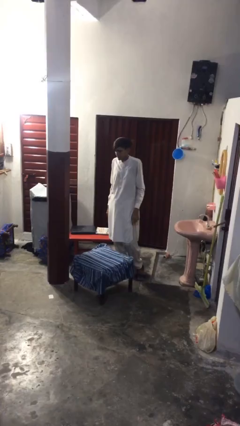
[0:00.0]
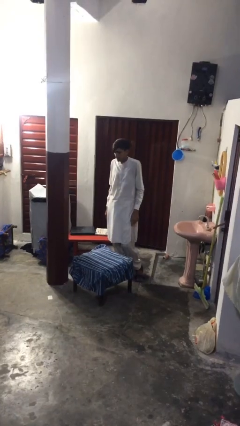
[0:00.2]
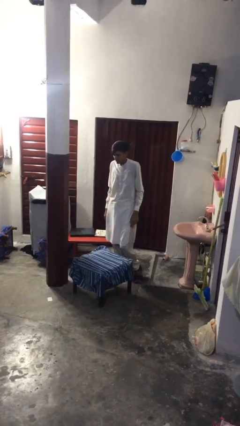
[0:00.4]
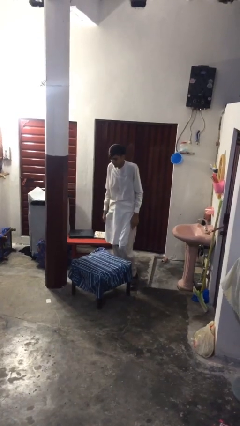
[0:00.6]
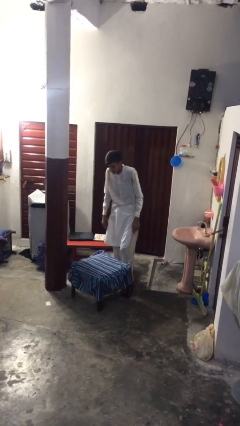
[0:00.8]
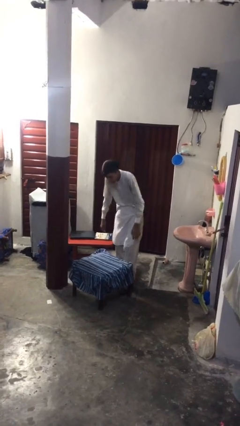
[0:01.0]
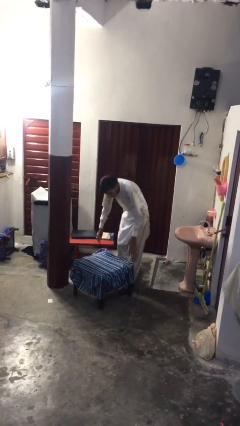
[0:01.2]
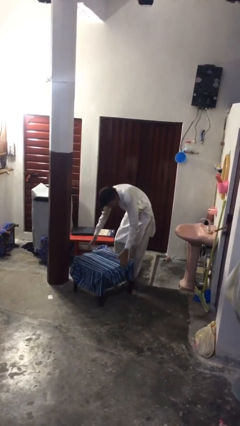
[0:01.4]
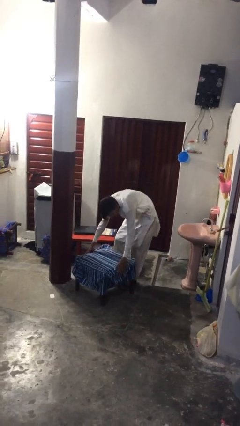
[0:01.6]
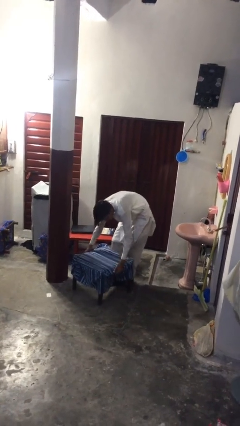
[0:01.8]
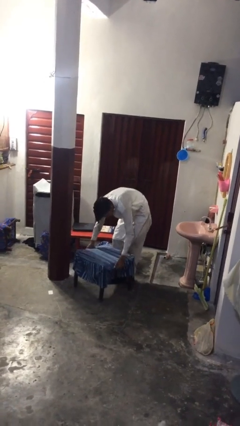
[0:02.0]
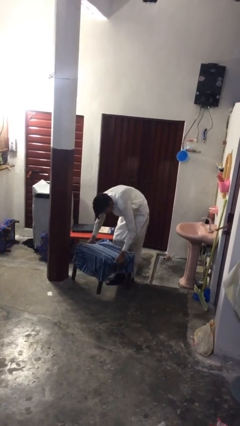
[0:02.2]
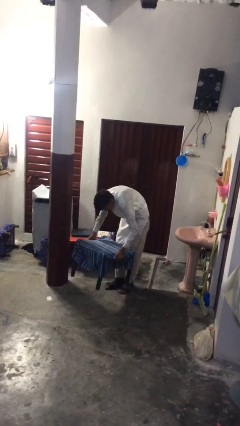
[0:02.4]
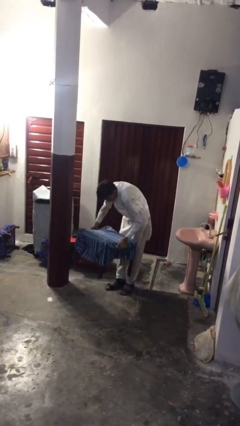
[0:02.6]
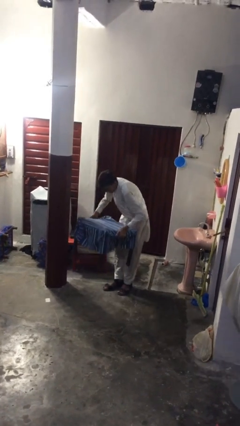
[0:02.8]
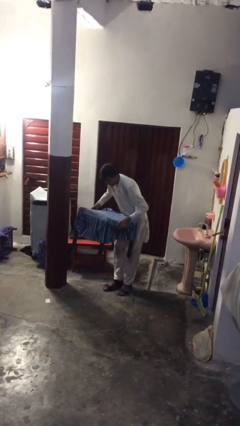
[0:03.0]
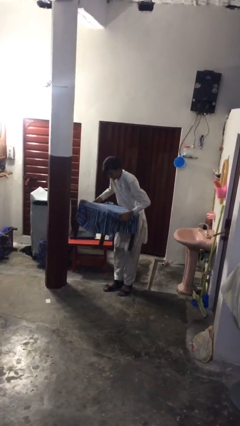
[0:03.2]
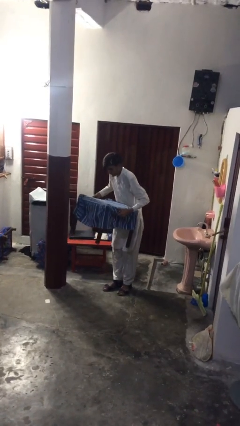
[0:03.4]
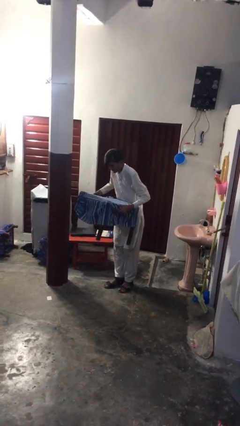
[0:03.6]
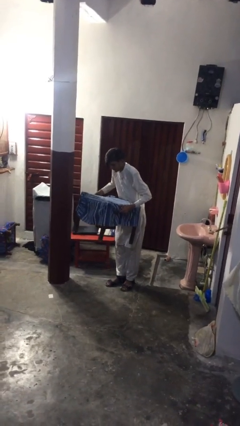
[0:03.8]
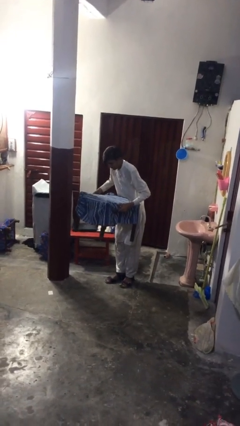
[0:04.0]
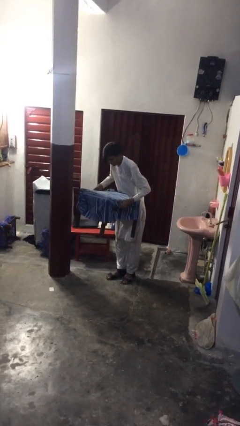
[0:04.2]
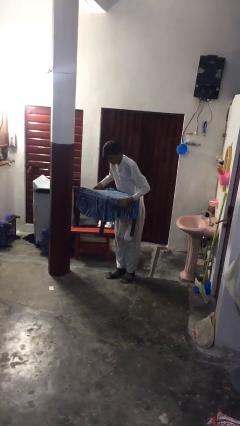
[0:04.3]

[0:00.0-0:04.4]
person picks up object from floor

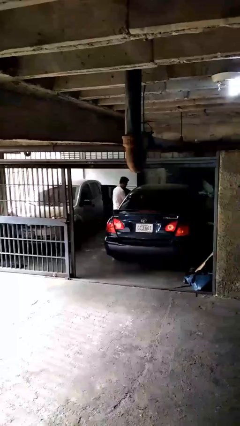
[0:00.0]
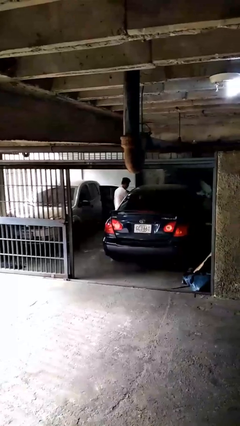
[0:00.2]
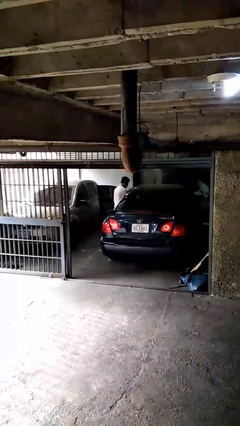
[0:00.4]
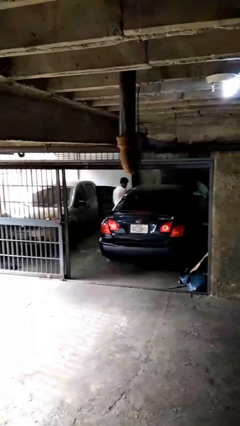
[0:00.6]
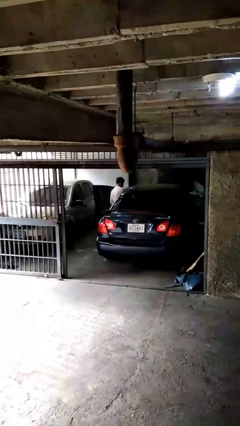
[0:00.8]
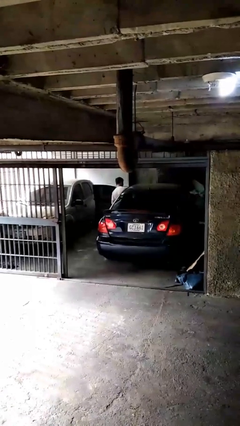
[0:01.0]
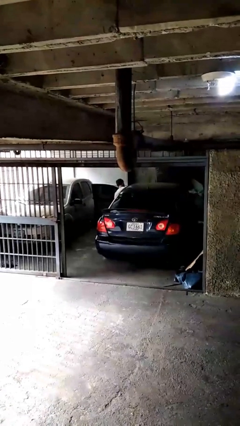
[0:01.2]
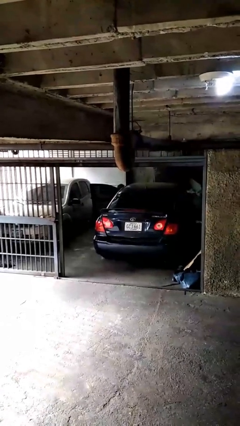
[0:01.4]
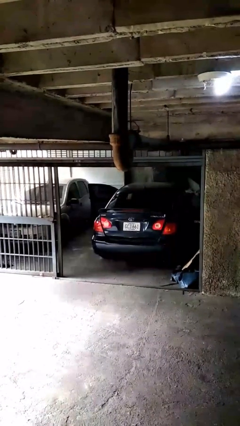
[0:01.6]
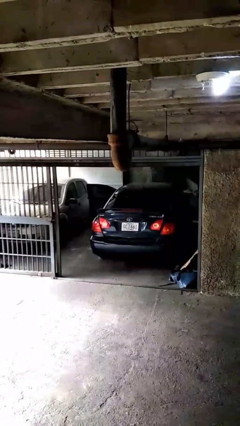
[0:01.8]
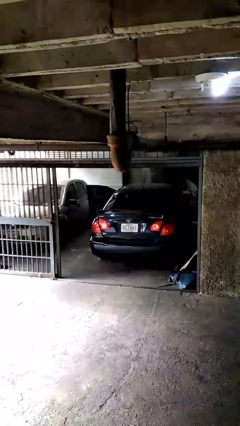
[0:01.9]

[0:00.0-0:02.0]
person enters car

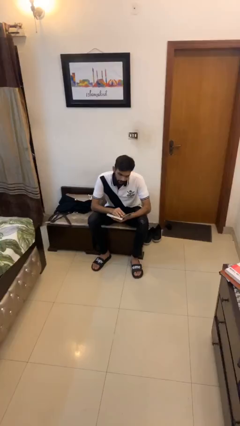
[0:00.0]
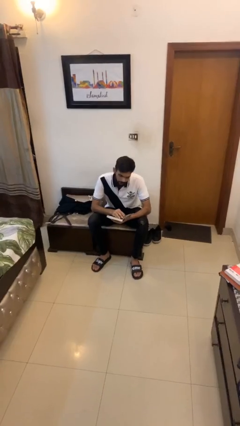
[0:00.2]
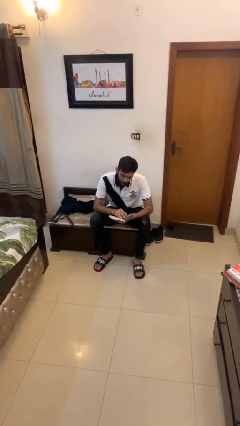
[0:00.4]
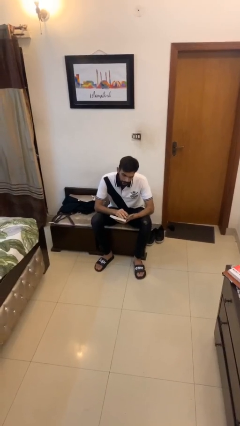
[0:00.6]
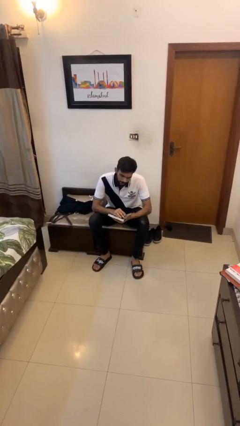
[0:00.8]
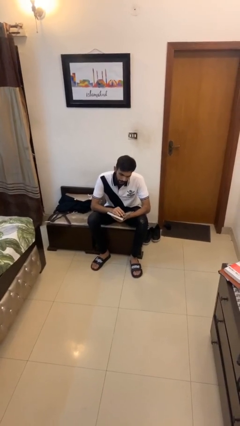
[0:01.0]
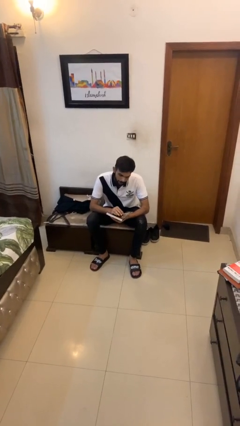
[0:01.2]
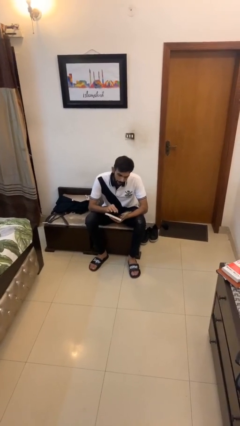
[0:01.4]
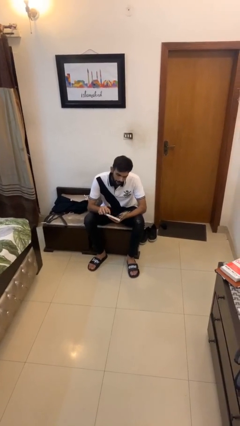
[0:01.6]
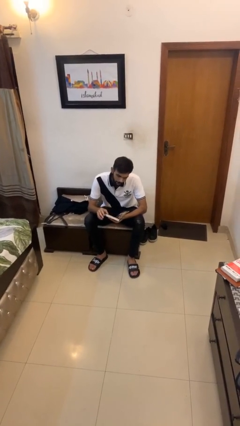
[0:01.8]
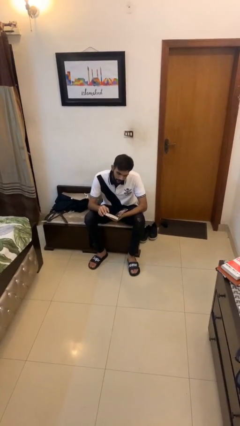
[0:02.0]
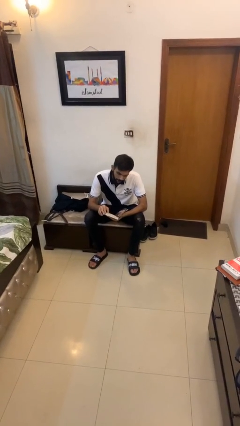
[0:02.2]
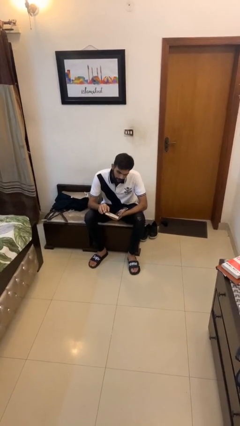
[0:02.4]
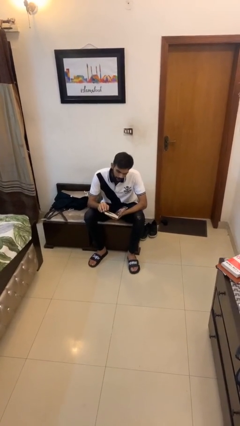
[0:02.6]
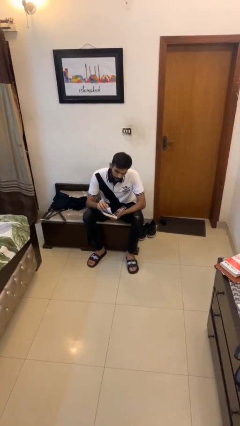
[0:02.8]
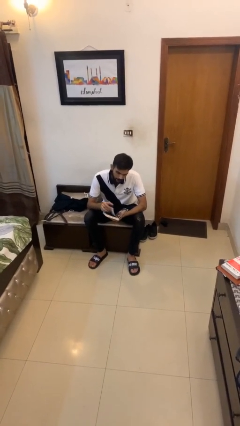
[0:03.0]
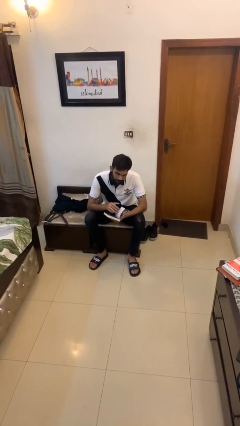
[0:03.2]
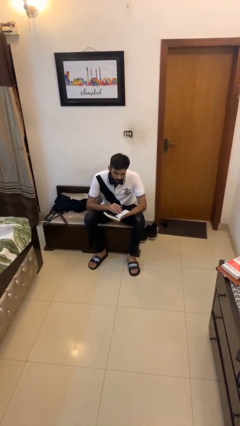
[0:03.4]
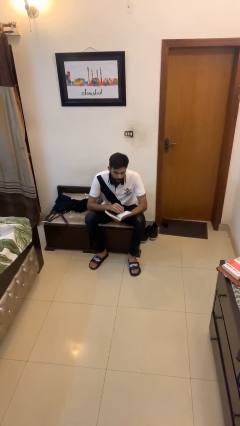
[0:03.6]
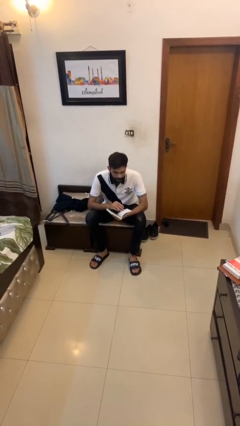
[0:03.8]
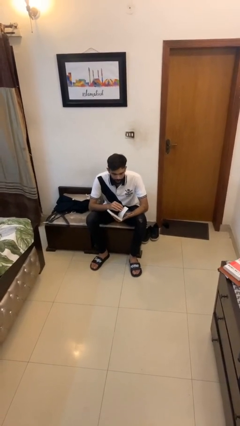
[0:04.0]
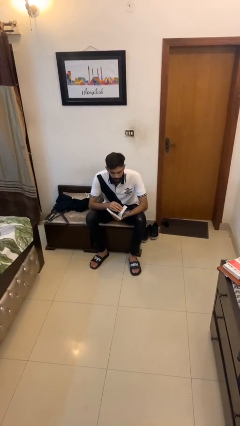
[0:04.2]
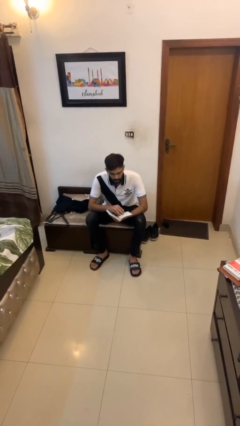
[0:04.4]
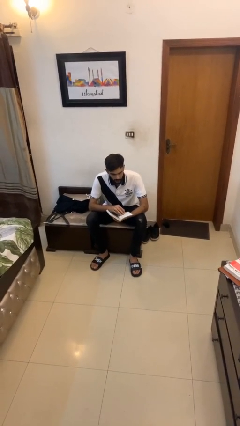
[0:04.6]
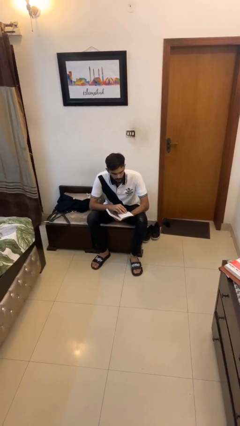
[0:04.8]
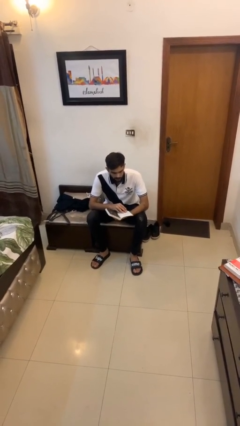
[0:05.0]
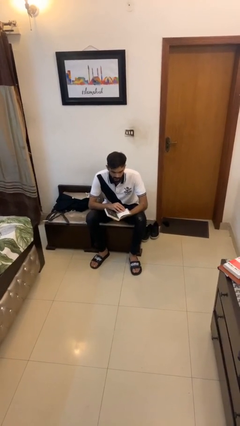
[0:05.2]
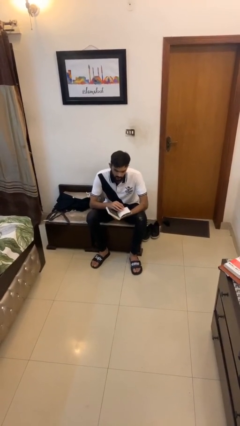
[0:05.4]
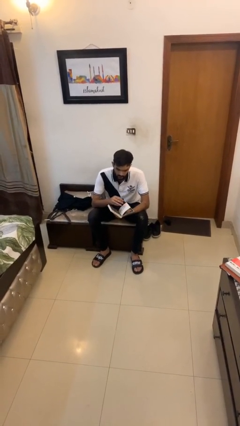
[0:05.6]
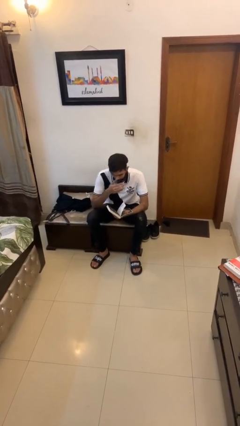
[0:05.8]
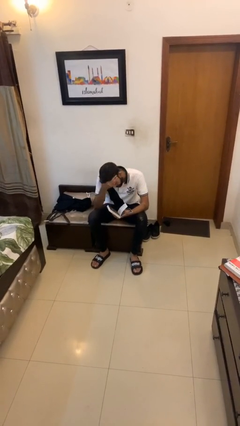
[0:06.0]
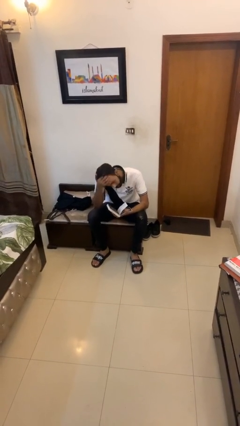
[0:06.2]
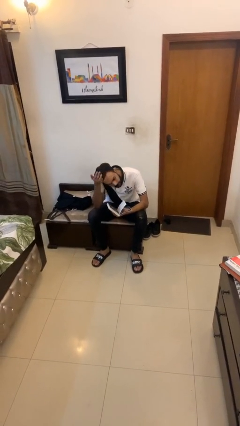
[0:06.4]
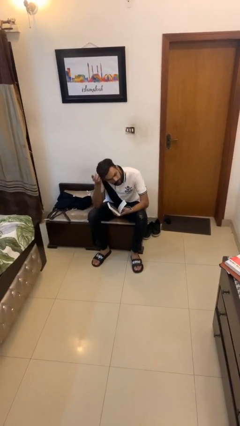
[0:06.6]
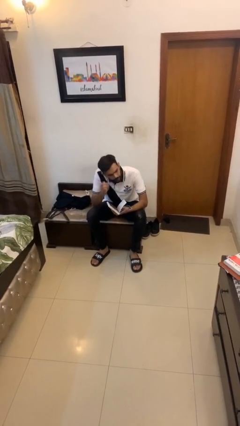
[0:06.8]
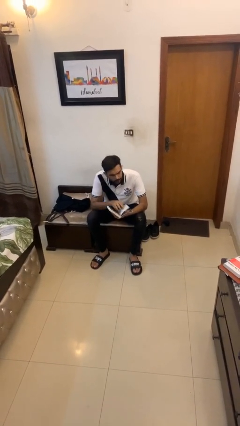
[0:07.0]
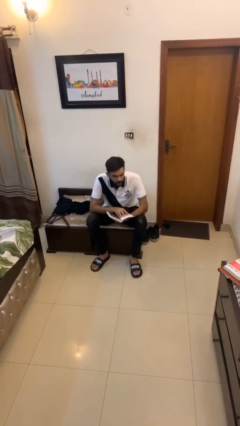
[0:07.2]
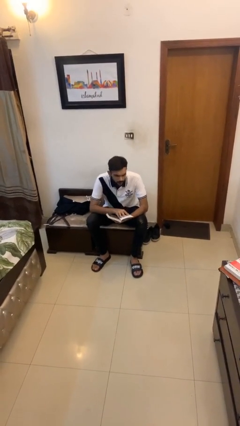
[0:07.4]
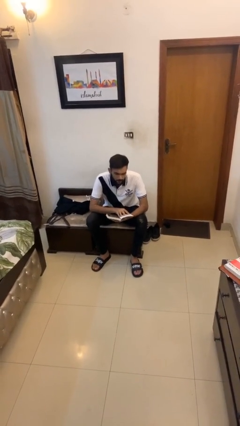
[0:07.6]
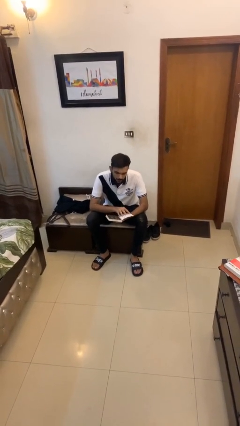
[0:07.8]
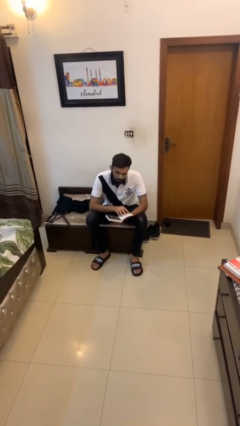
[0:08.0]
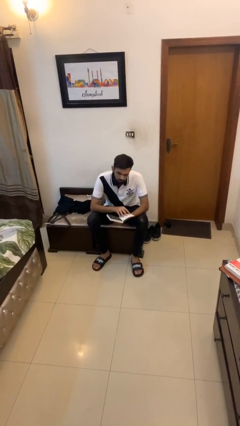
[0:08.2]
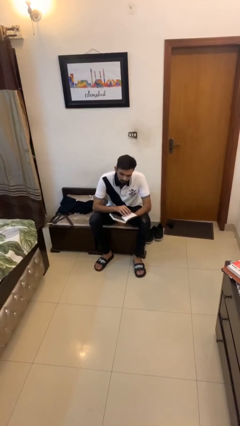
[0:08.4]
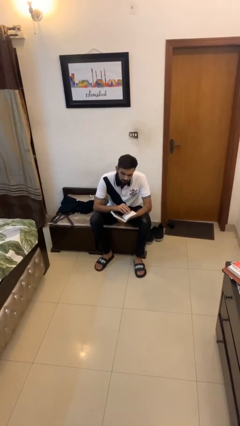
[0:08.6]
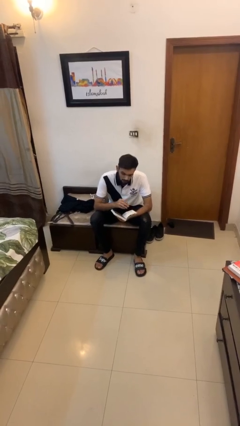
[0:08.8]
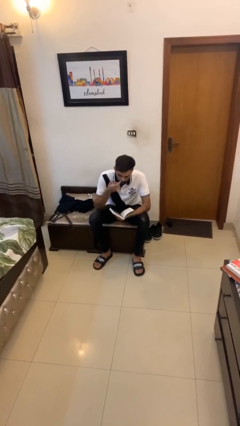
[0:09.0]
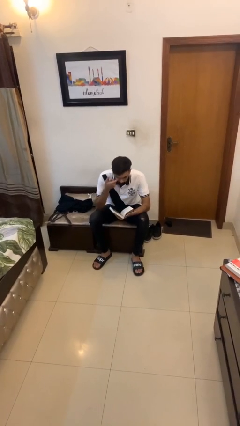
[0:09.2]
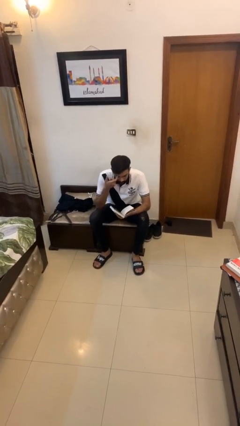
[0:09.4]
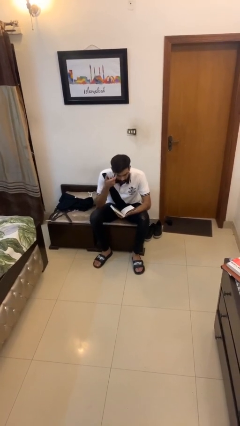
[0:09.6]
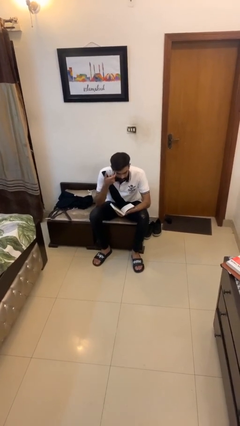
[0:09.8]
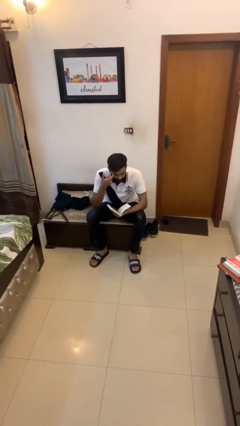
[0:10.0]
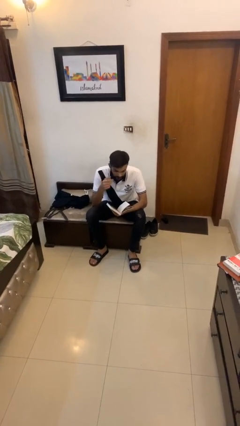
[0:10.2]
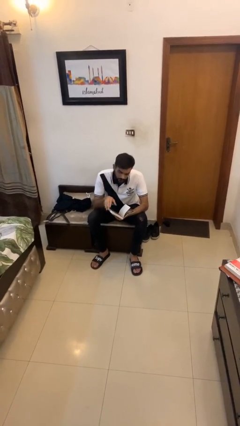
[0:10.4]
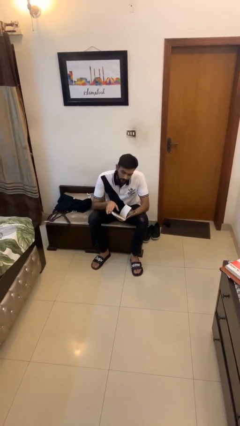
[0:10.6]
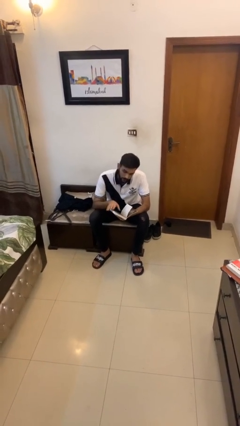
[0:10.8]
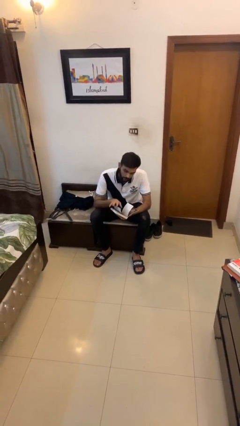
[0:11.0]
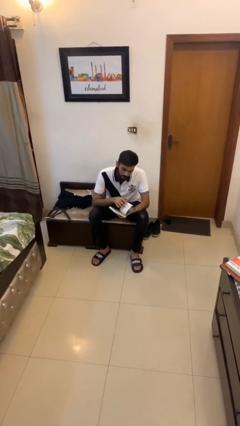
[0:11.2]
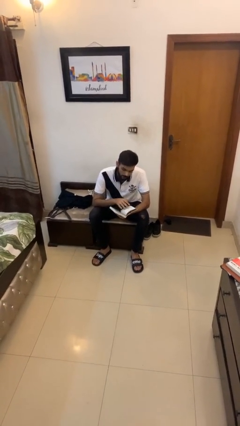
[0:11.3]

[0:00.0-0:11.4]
person reads document

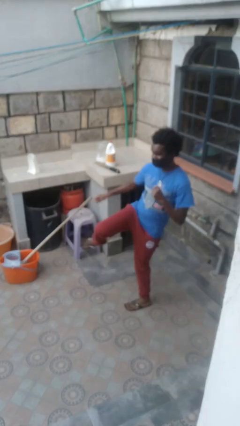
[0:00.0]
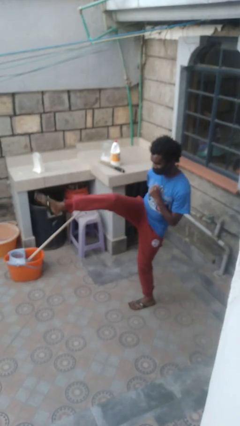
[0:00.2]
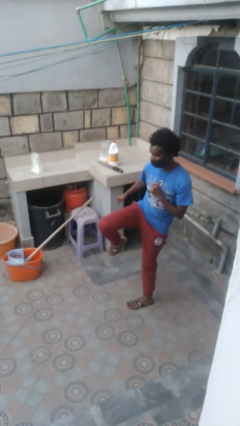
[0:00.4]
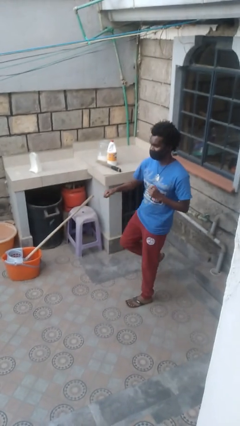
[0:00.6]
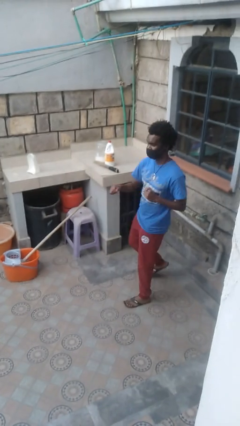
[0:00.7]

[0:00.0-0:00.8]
person karate kicks
